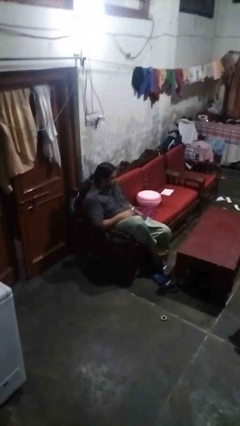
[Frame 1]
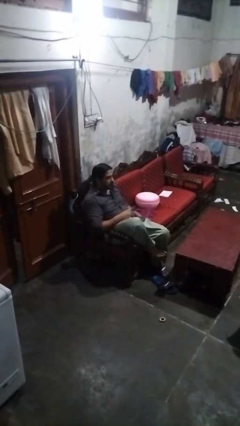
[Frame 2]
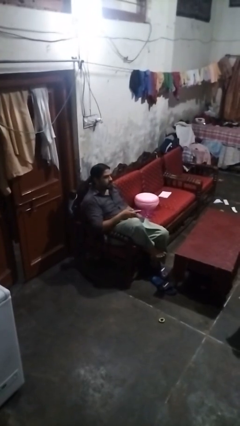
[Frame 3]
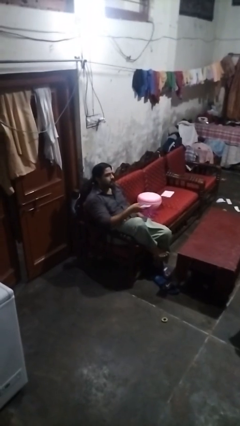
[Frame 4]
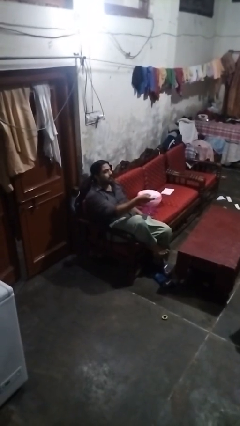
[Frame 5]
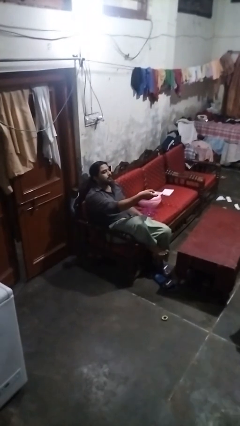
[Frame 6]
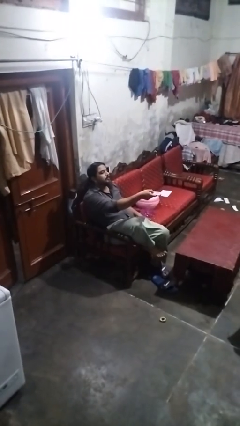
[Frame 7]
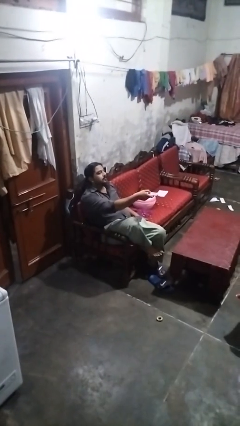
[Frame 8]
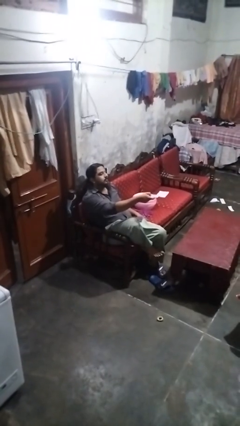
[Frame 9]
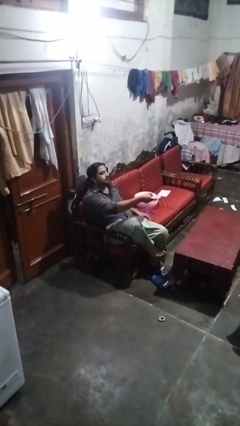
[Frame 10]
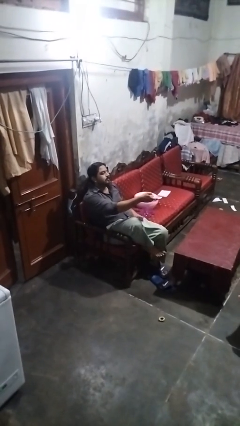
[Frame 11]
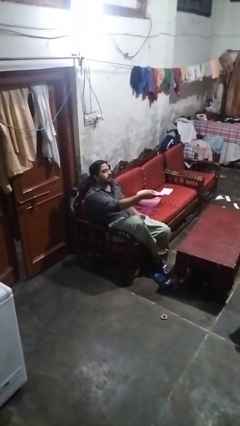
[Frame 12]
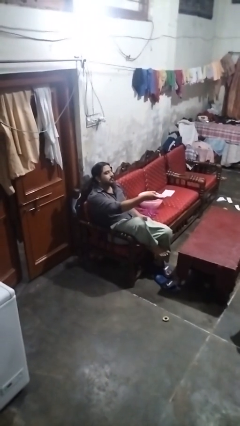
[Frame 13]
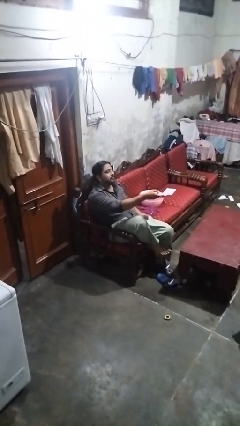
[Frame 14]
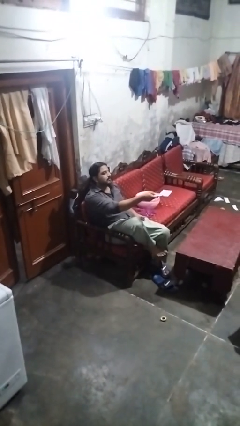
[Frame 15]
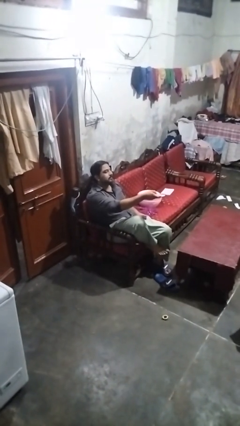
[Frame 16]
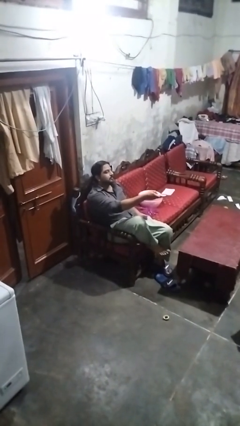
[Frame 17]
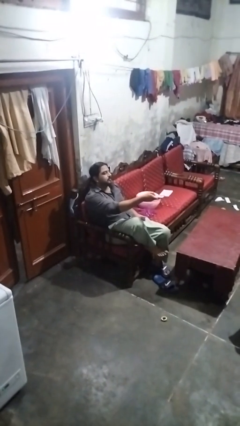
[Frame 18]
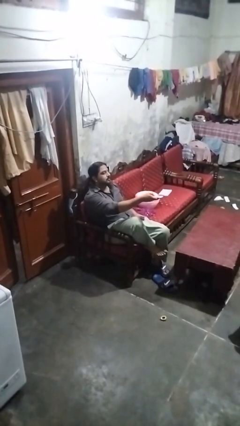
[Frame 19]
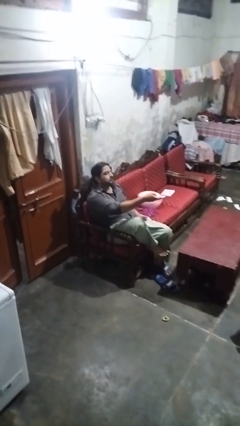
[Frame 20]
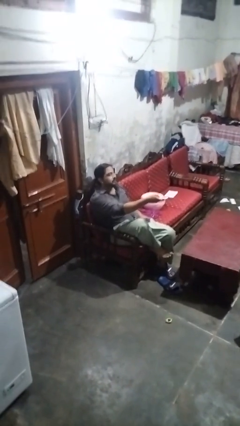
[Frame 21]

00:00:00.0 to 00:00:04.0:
person uses television remote

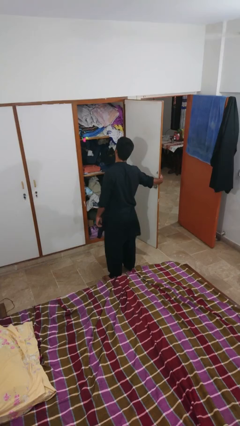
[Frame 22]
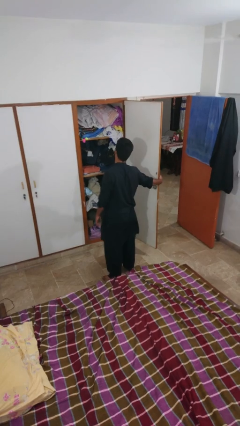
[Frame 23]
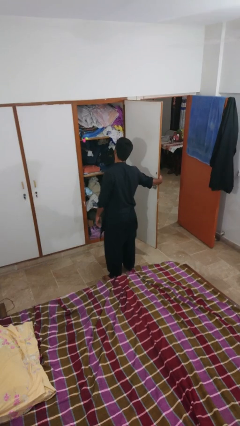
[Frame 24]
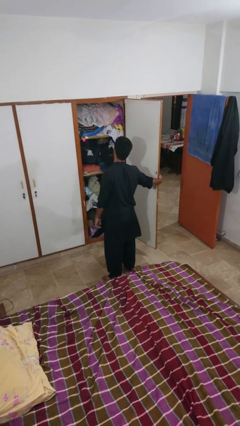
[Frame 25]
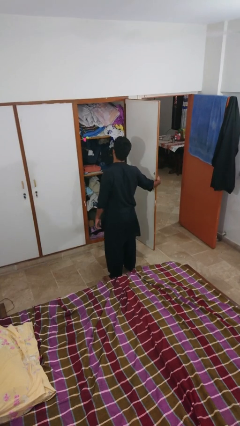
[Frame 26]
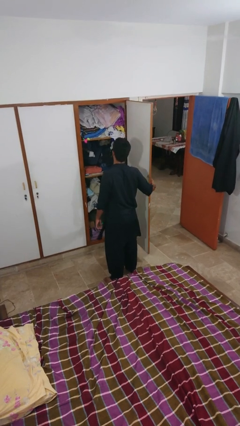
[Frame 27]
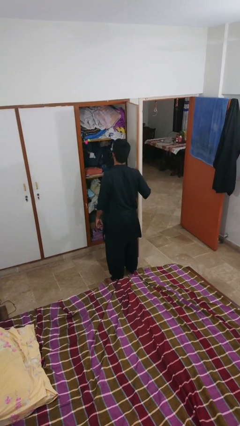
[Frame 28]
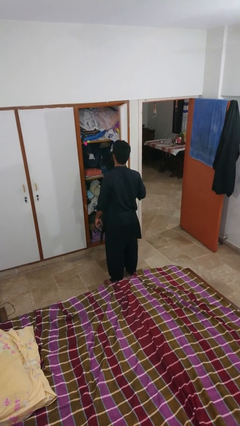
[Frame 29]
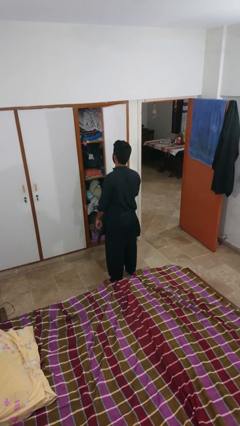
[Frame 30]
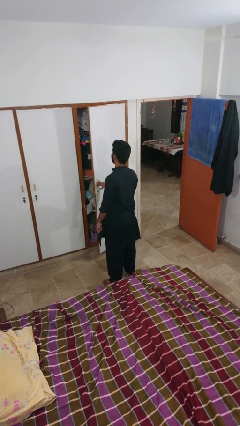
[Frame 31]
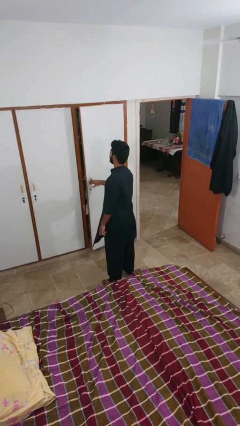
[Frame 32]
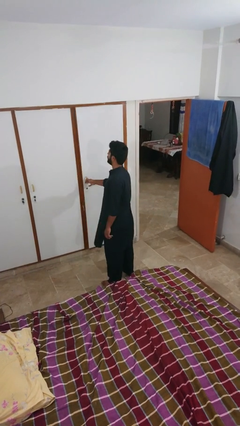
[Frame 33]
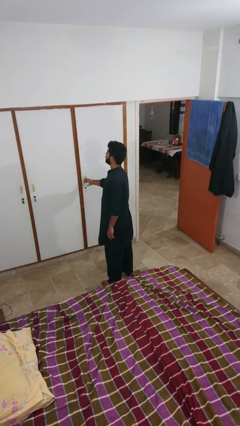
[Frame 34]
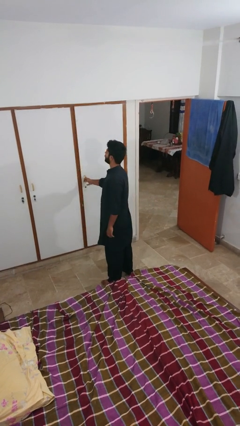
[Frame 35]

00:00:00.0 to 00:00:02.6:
person closes closet door

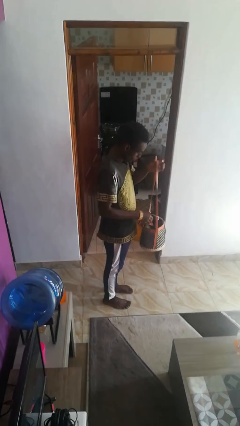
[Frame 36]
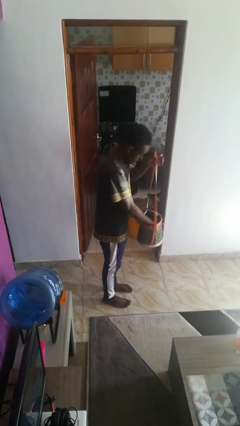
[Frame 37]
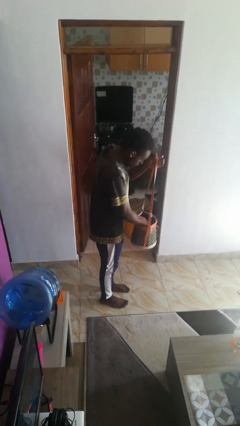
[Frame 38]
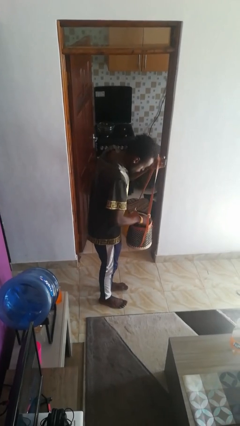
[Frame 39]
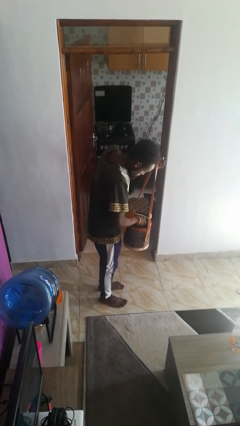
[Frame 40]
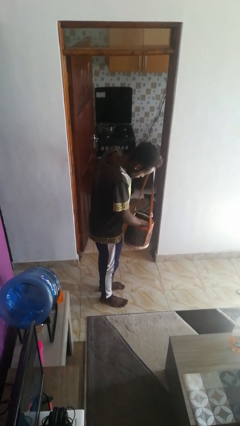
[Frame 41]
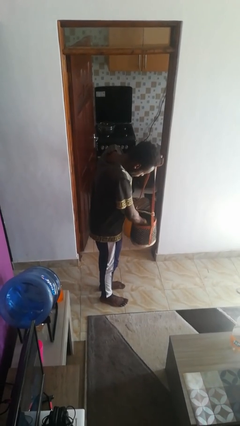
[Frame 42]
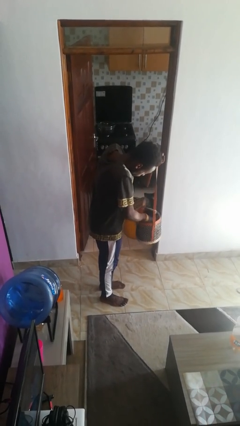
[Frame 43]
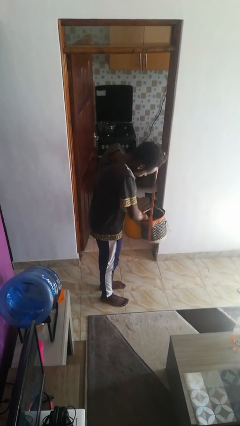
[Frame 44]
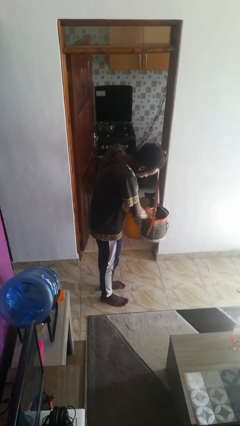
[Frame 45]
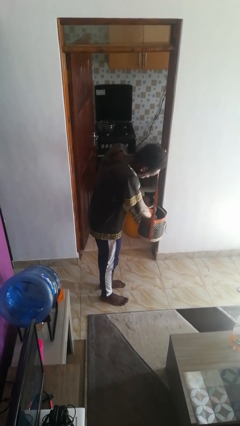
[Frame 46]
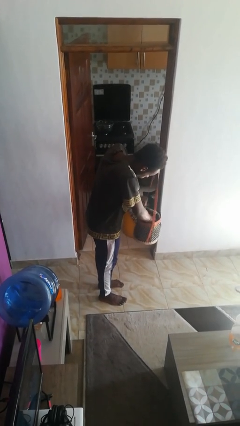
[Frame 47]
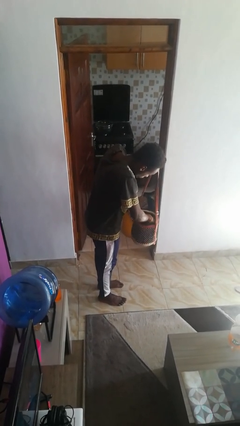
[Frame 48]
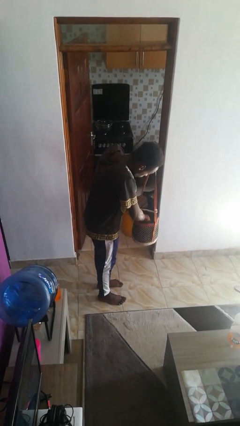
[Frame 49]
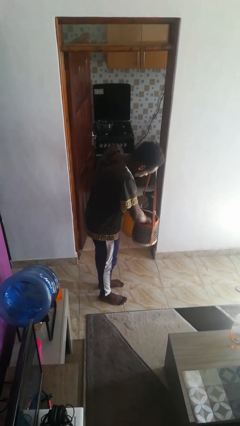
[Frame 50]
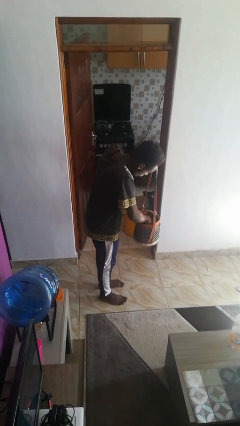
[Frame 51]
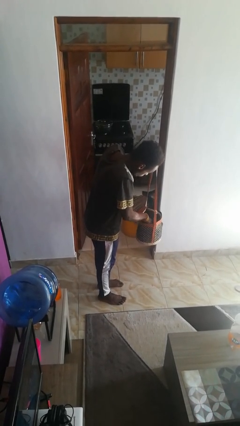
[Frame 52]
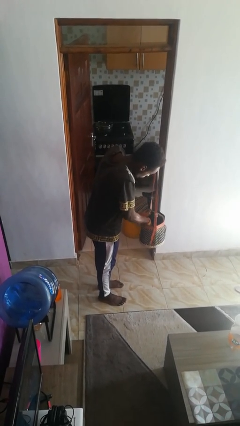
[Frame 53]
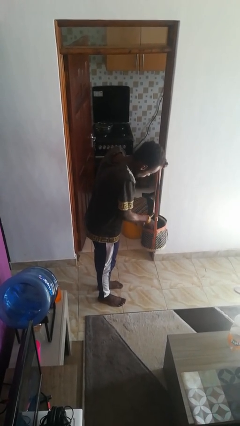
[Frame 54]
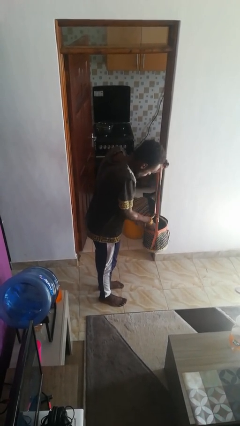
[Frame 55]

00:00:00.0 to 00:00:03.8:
person searches in purse

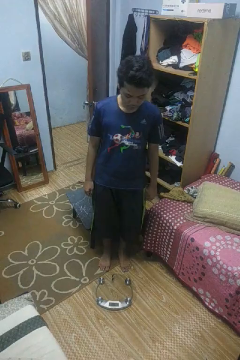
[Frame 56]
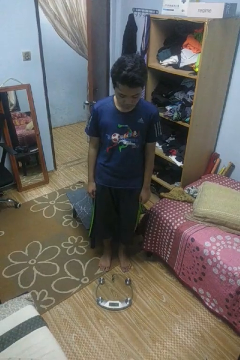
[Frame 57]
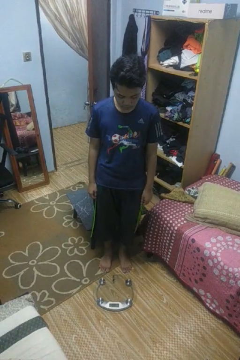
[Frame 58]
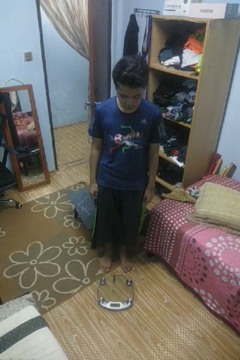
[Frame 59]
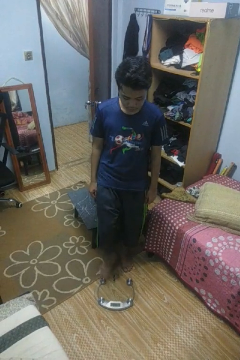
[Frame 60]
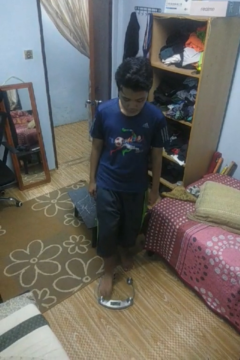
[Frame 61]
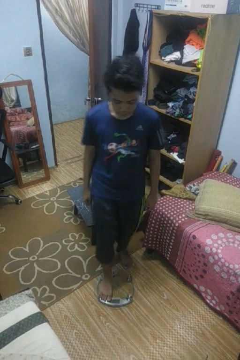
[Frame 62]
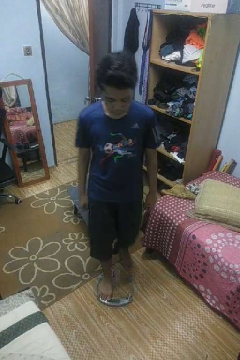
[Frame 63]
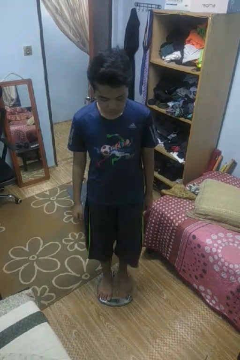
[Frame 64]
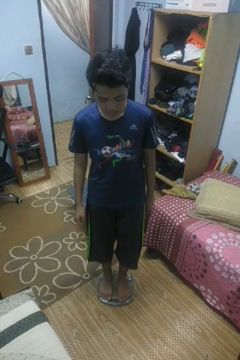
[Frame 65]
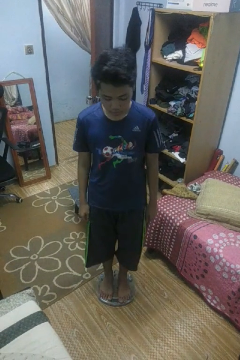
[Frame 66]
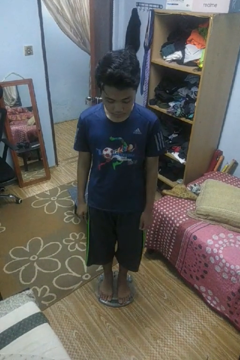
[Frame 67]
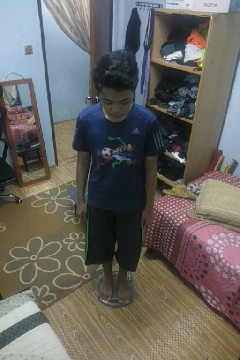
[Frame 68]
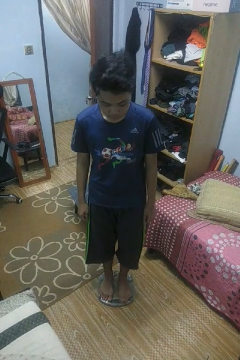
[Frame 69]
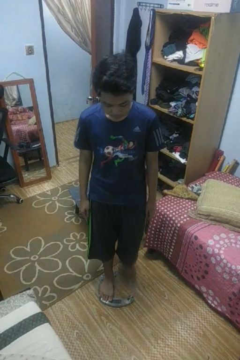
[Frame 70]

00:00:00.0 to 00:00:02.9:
person uses bodyweight scale

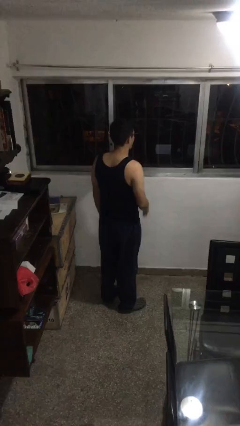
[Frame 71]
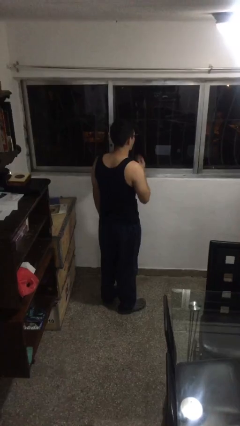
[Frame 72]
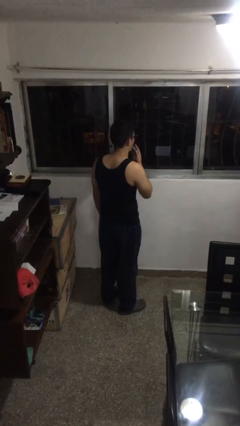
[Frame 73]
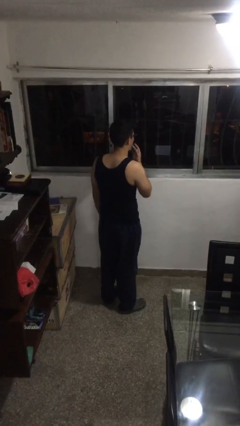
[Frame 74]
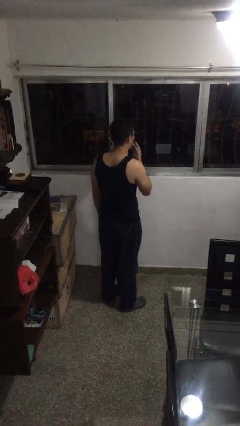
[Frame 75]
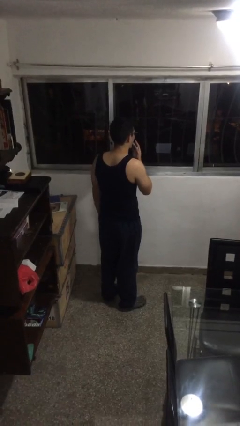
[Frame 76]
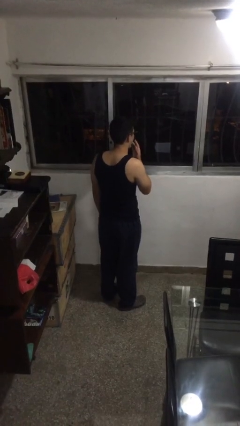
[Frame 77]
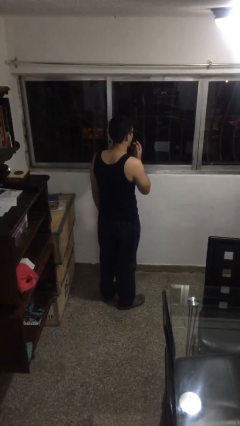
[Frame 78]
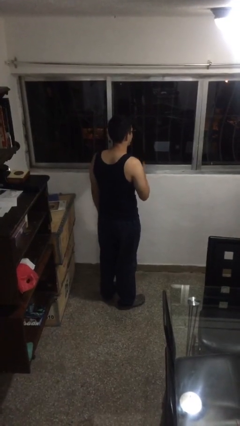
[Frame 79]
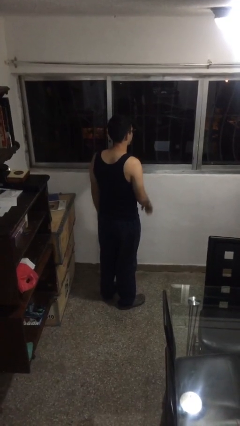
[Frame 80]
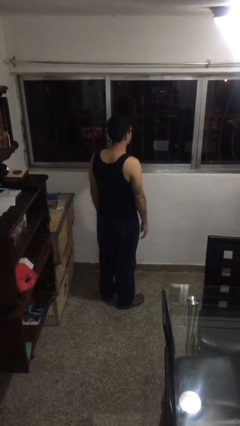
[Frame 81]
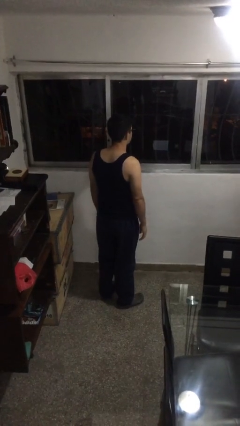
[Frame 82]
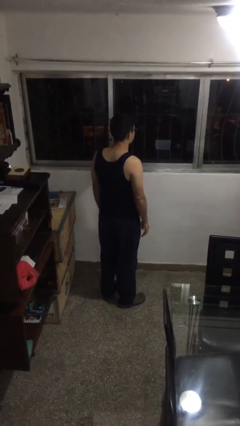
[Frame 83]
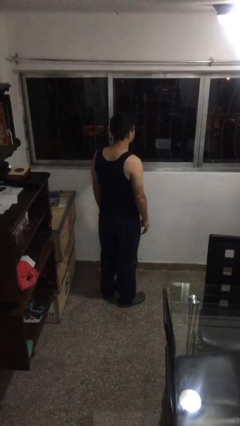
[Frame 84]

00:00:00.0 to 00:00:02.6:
person licks fingers

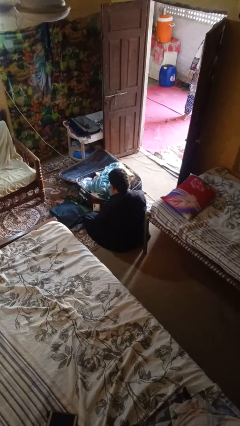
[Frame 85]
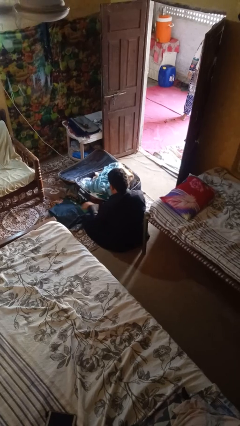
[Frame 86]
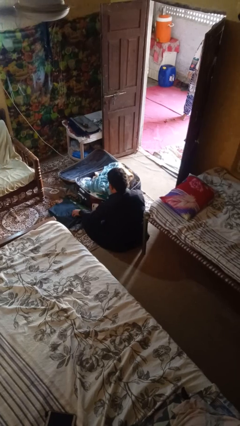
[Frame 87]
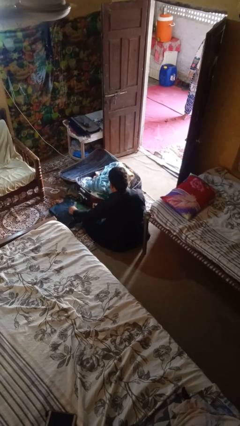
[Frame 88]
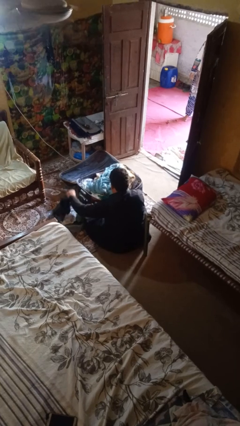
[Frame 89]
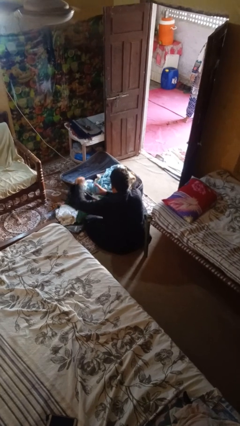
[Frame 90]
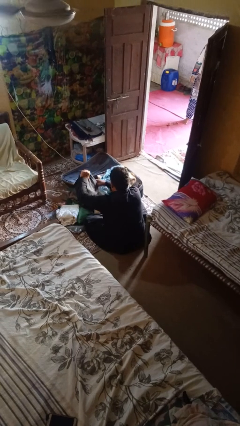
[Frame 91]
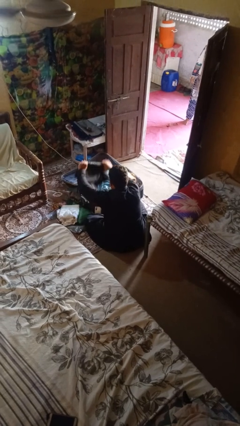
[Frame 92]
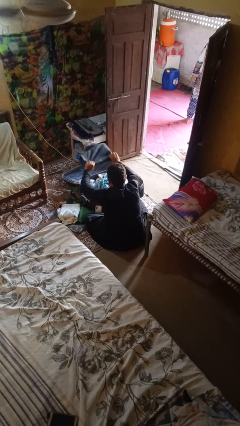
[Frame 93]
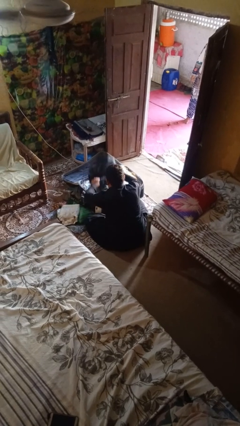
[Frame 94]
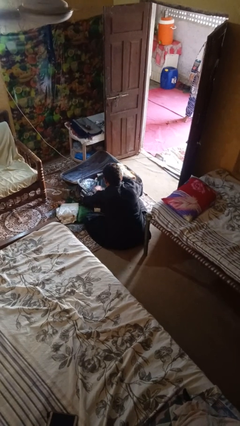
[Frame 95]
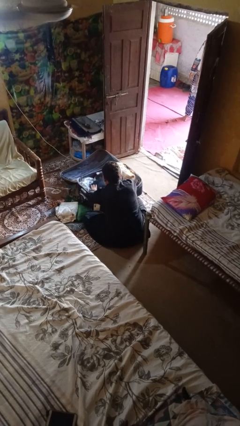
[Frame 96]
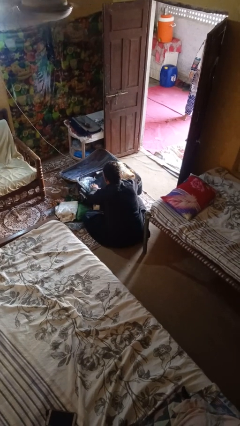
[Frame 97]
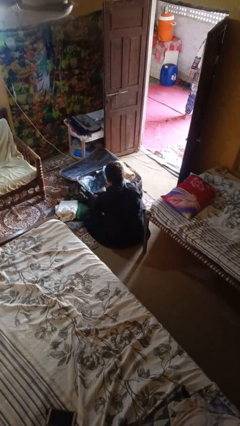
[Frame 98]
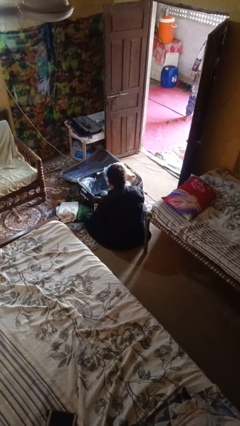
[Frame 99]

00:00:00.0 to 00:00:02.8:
person loads clothes into suitcase
